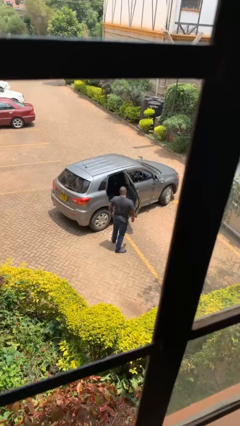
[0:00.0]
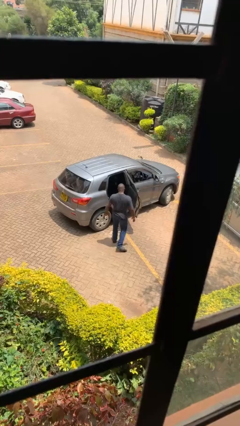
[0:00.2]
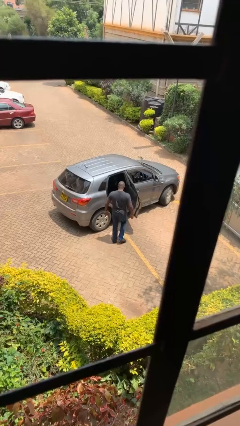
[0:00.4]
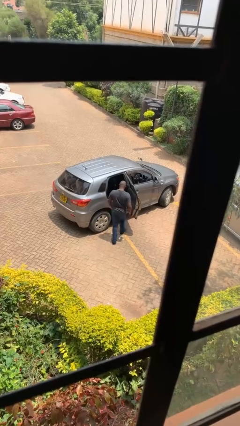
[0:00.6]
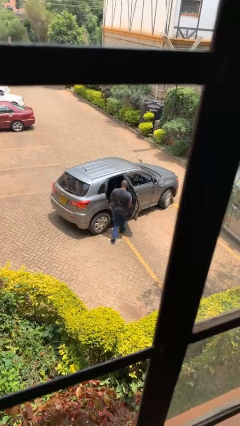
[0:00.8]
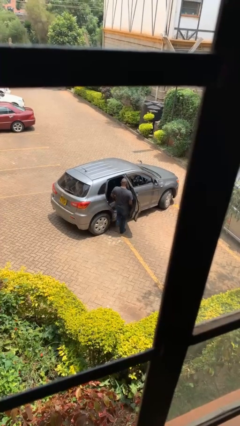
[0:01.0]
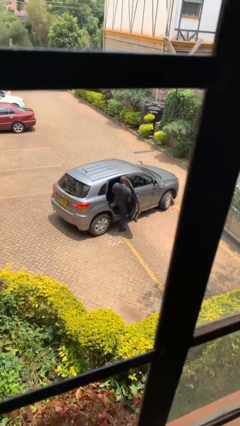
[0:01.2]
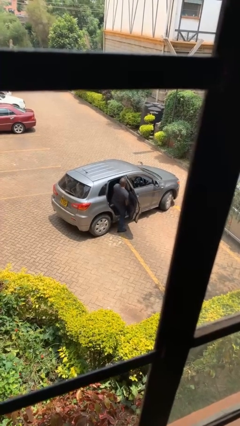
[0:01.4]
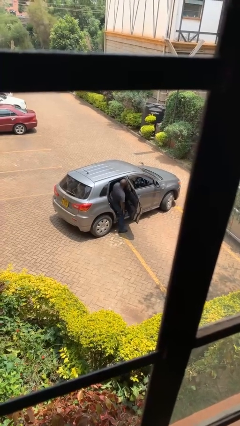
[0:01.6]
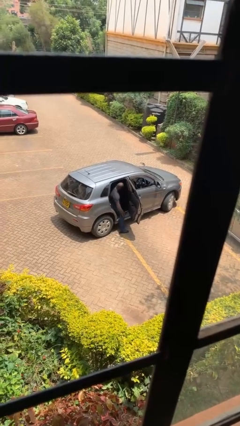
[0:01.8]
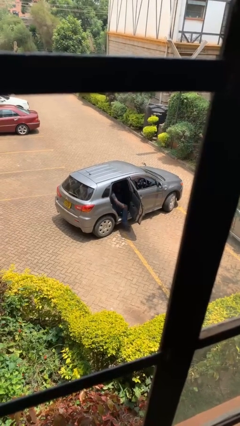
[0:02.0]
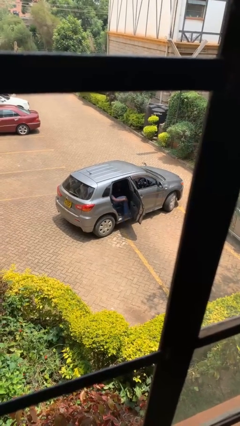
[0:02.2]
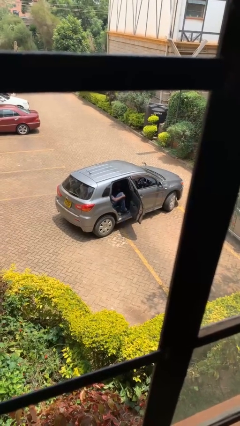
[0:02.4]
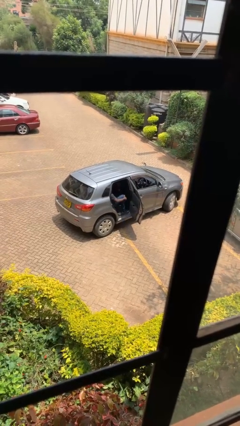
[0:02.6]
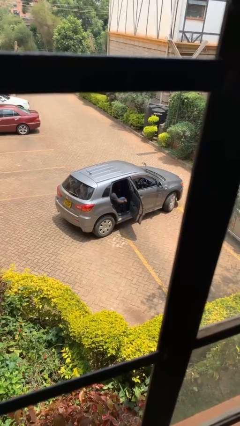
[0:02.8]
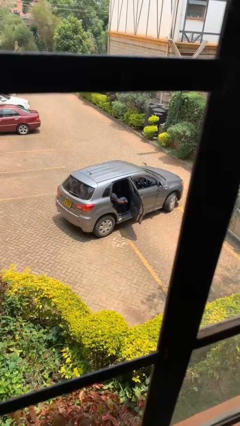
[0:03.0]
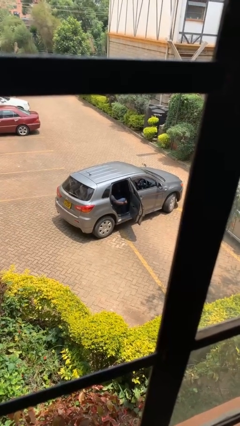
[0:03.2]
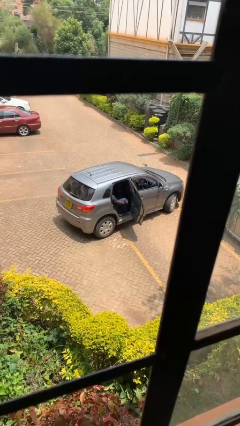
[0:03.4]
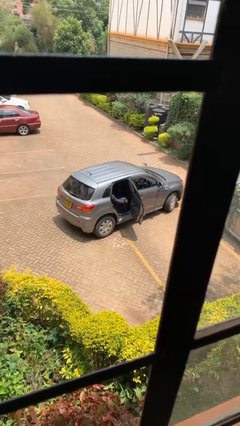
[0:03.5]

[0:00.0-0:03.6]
person enters car

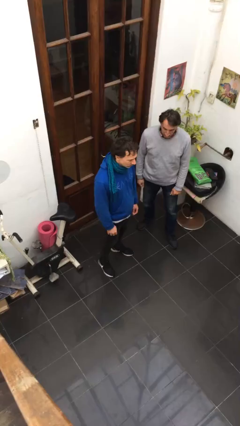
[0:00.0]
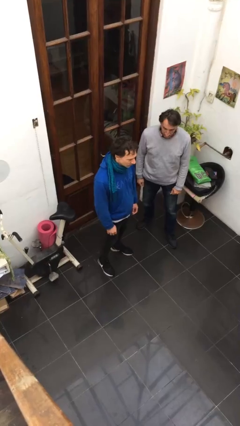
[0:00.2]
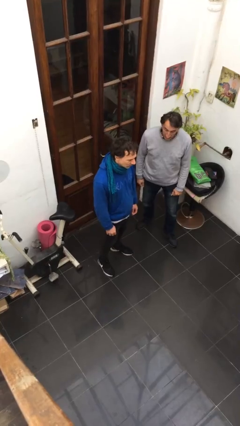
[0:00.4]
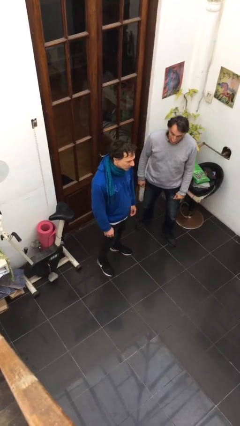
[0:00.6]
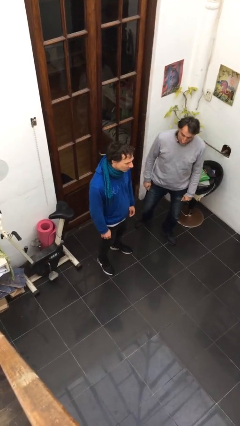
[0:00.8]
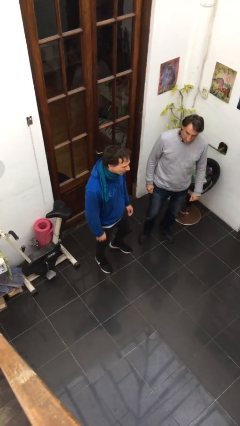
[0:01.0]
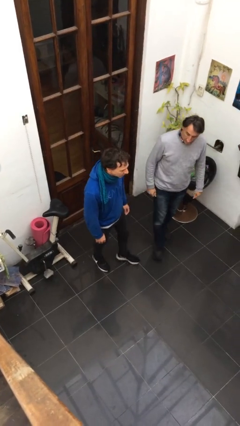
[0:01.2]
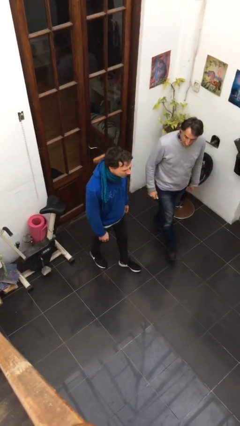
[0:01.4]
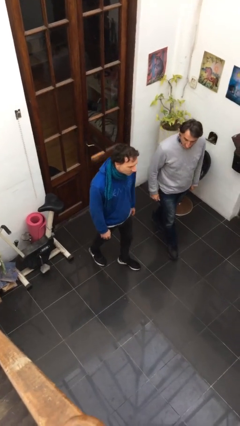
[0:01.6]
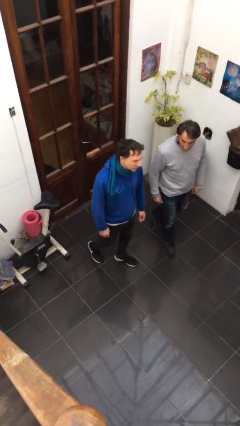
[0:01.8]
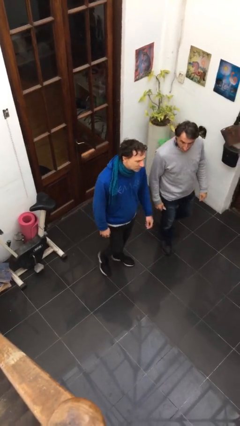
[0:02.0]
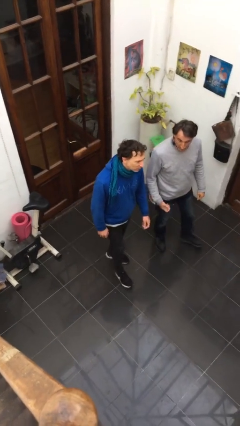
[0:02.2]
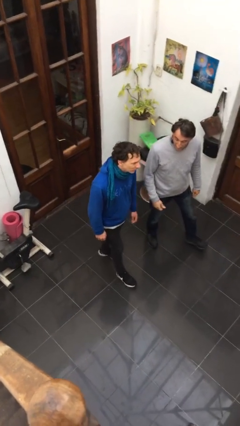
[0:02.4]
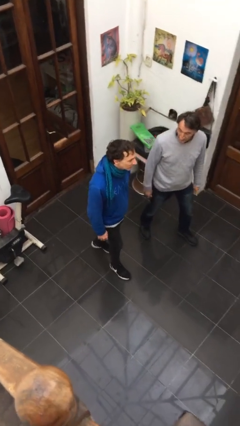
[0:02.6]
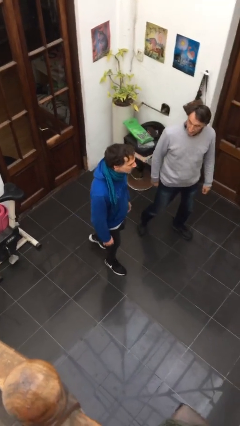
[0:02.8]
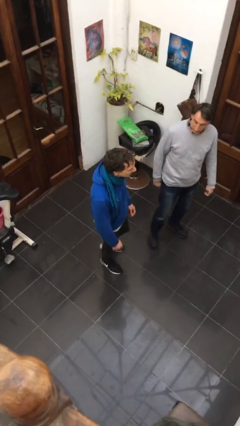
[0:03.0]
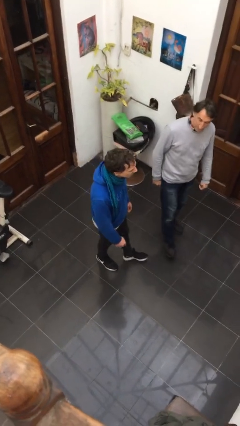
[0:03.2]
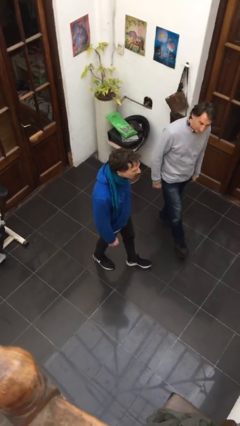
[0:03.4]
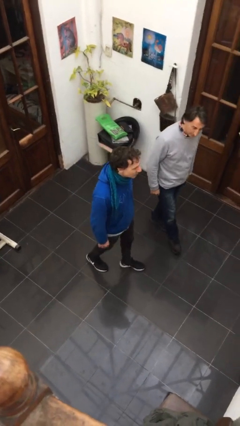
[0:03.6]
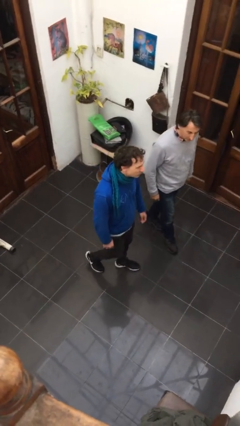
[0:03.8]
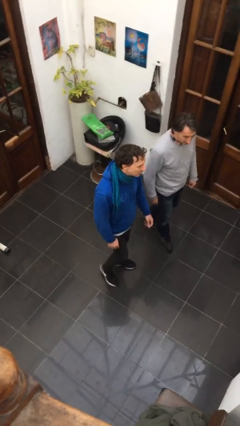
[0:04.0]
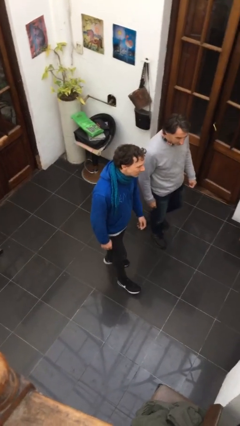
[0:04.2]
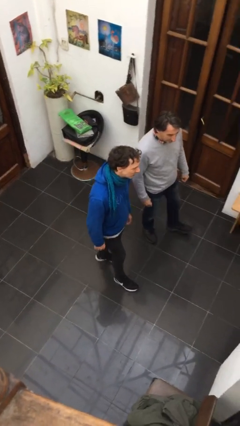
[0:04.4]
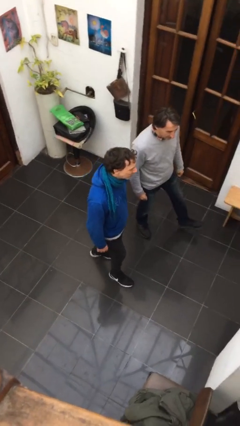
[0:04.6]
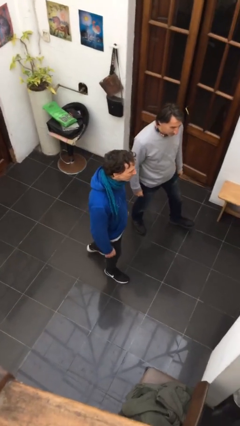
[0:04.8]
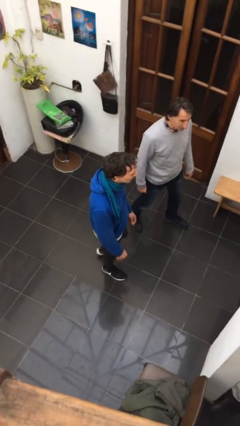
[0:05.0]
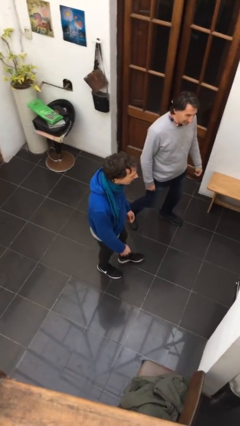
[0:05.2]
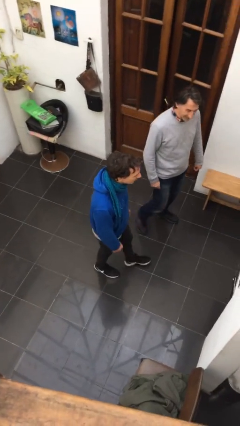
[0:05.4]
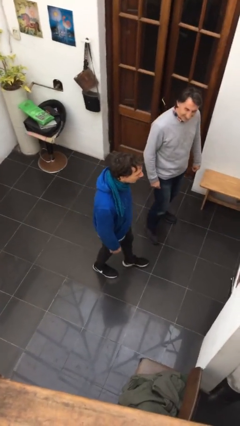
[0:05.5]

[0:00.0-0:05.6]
person talks to person

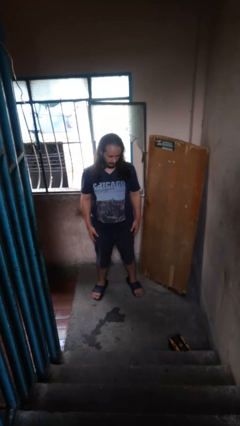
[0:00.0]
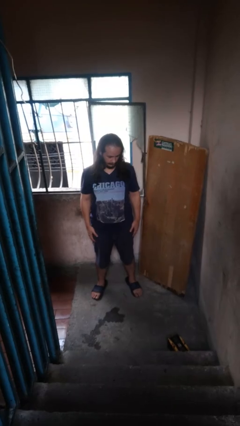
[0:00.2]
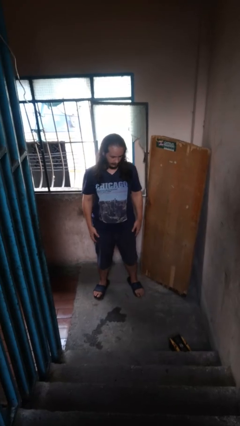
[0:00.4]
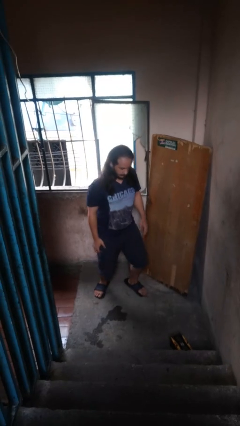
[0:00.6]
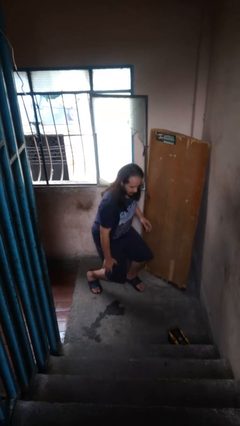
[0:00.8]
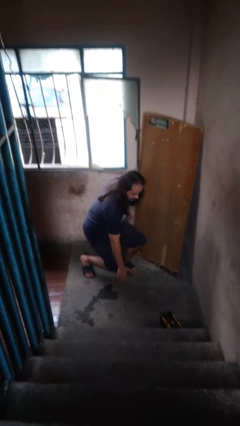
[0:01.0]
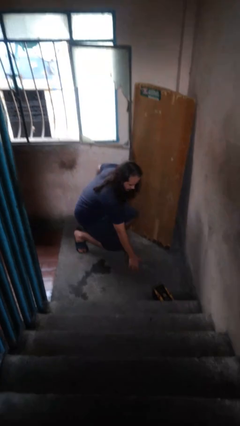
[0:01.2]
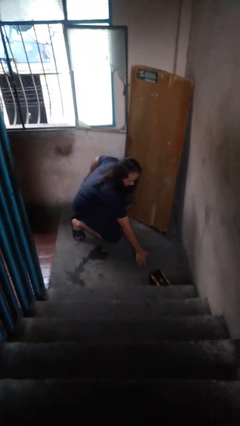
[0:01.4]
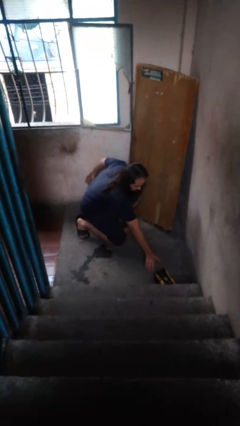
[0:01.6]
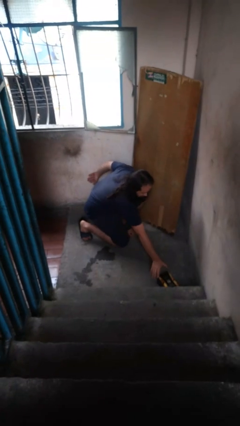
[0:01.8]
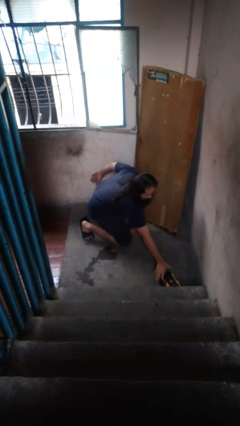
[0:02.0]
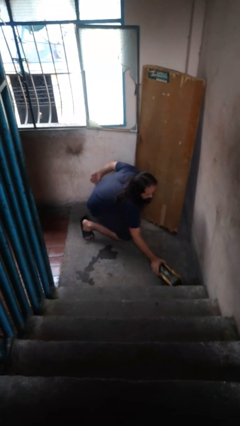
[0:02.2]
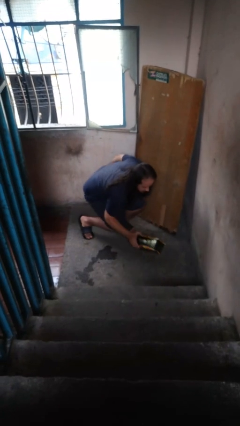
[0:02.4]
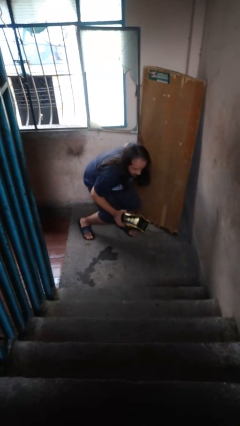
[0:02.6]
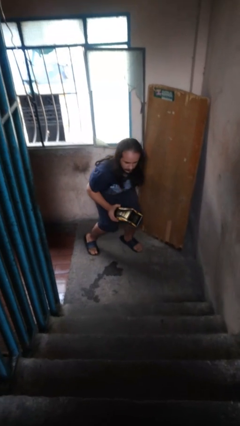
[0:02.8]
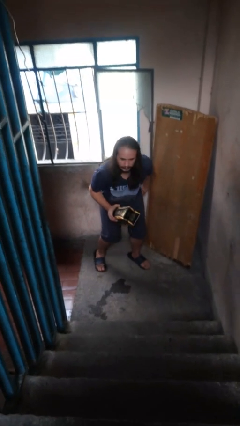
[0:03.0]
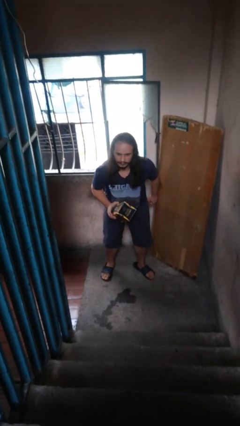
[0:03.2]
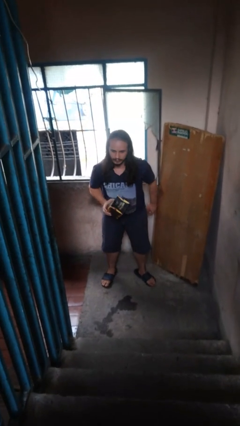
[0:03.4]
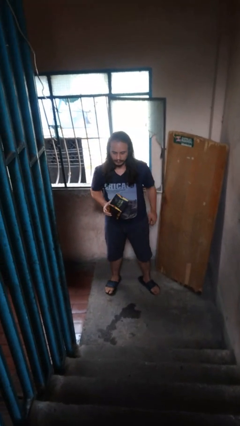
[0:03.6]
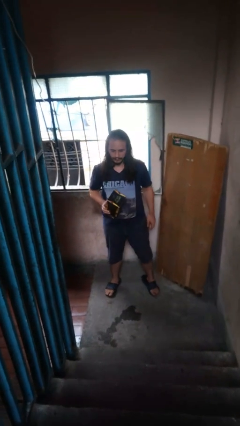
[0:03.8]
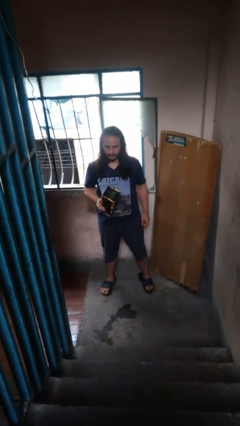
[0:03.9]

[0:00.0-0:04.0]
person picks up object from floor

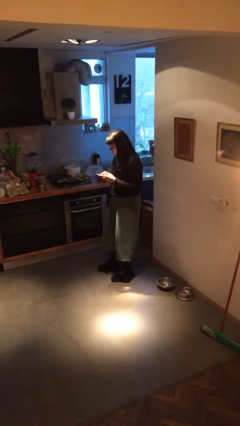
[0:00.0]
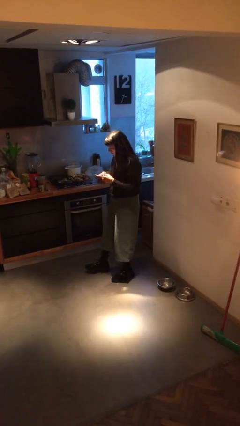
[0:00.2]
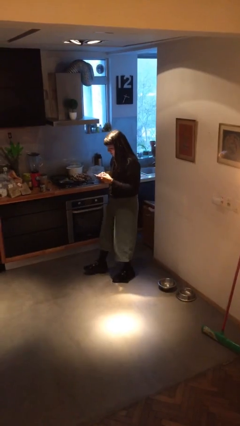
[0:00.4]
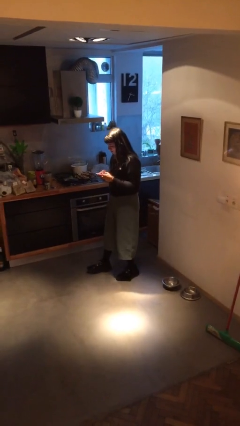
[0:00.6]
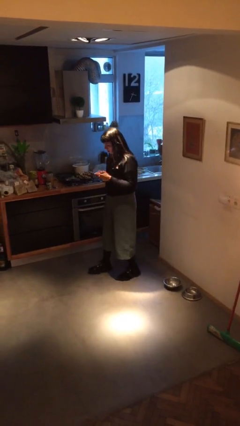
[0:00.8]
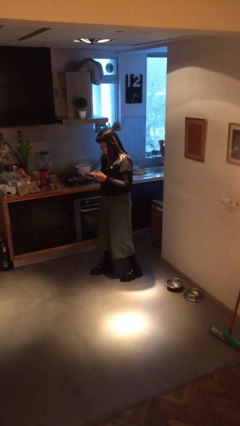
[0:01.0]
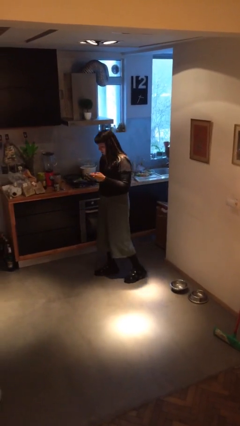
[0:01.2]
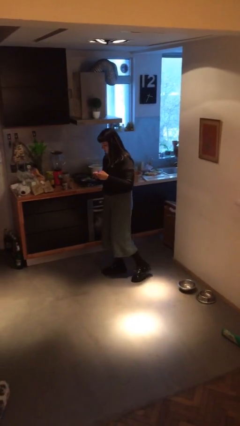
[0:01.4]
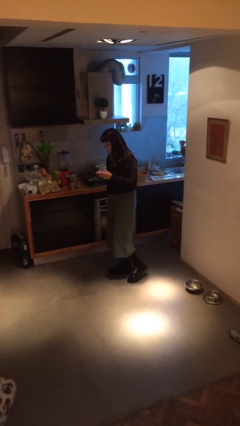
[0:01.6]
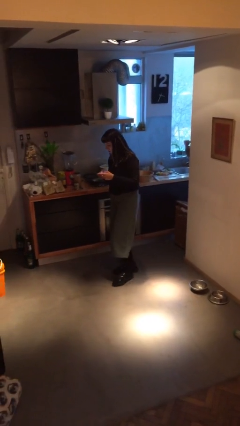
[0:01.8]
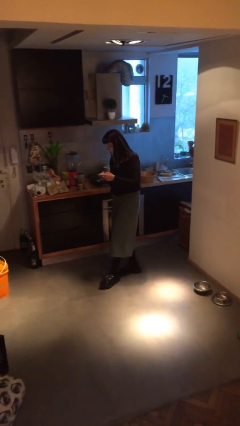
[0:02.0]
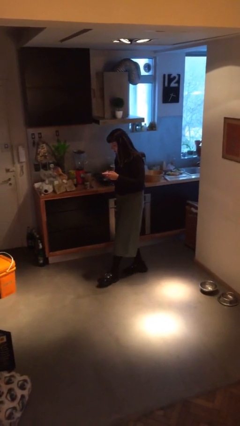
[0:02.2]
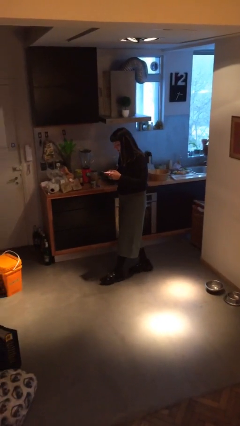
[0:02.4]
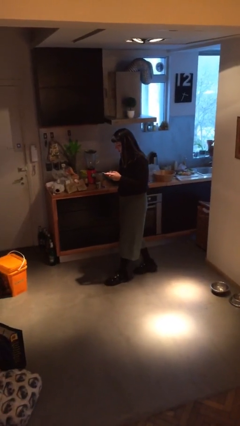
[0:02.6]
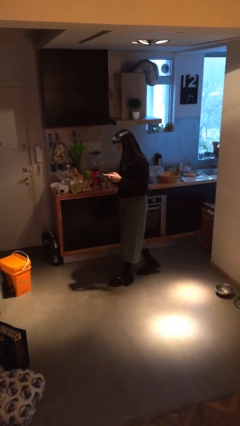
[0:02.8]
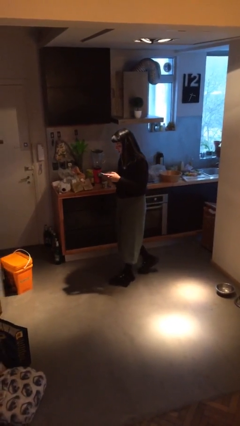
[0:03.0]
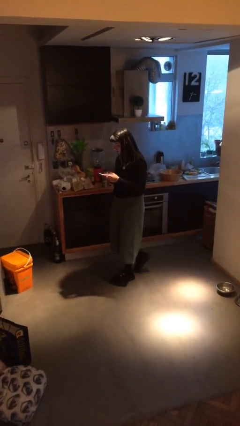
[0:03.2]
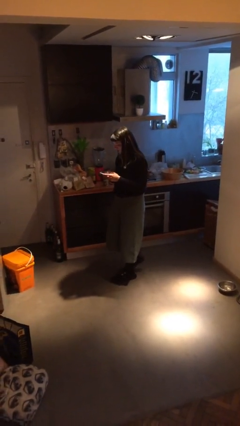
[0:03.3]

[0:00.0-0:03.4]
person texts on phone

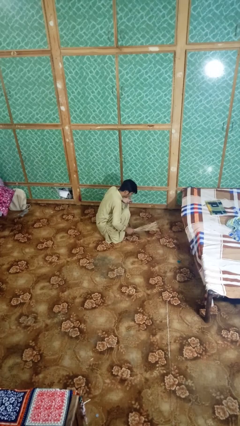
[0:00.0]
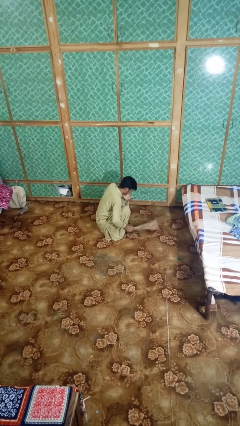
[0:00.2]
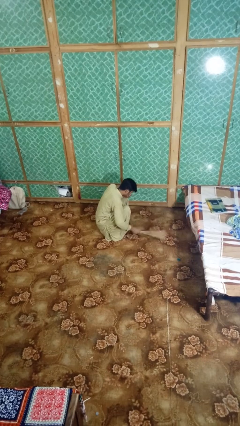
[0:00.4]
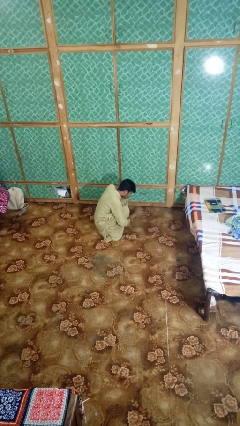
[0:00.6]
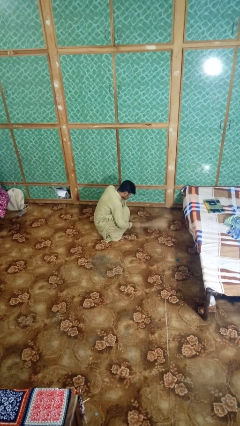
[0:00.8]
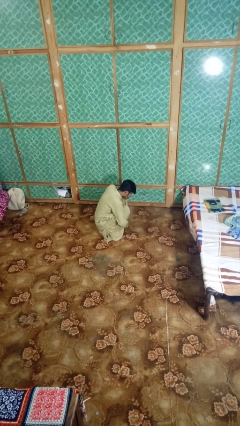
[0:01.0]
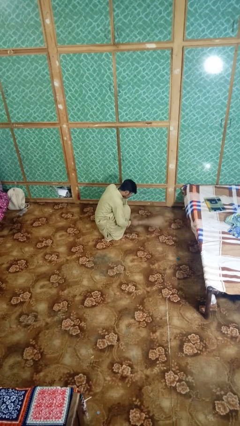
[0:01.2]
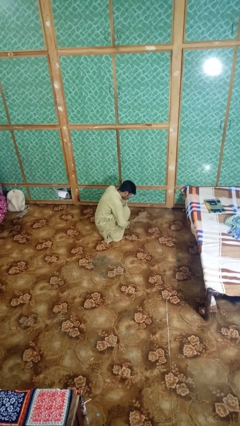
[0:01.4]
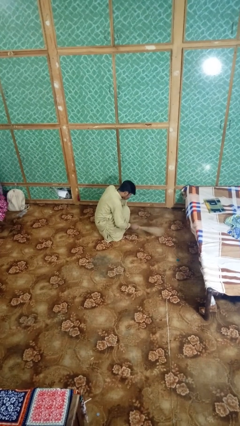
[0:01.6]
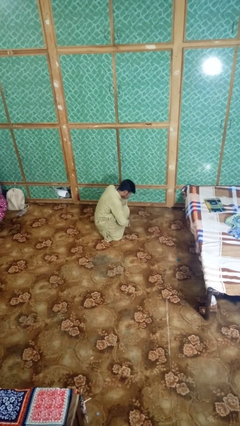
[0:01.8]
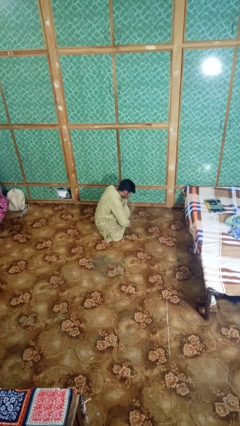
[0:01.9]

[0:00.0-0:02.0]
person yawns
